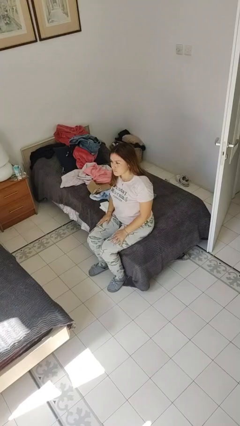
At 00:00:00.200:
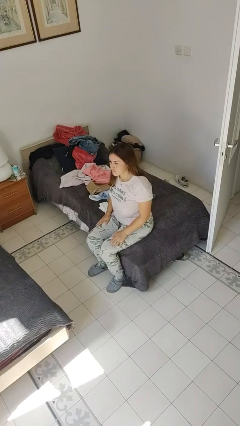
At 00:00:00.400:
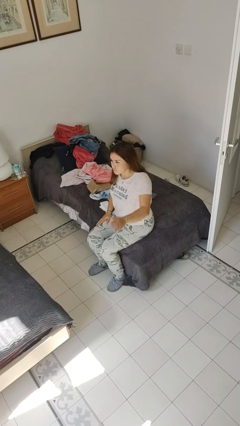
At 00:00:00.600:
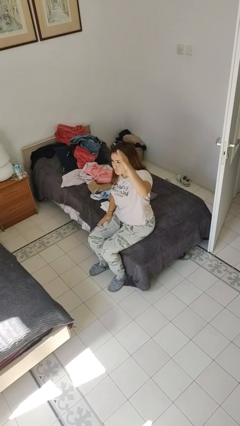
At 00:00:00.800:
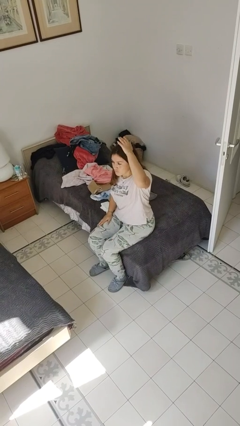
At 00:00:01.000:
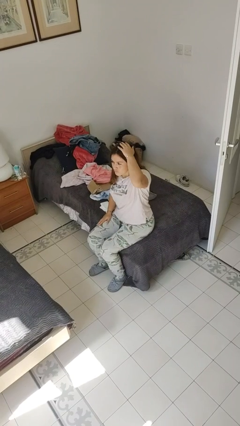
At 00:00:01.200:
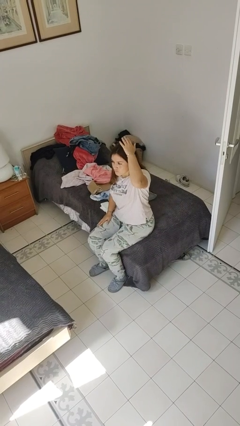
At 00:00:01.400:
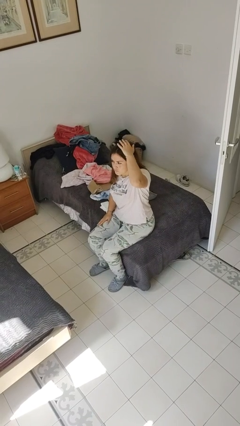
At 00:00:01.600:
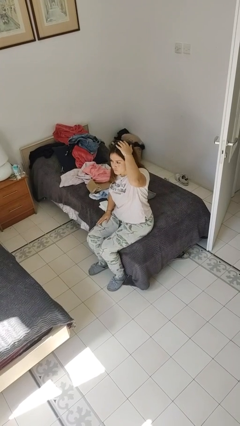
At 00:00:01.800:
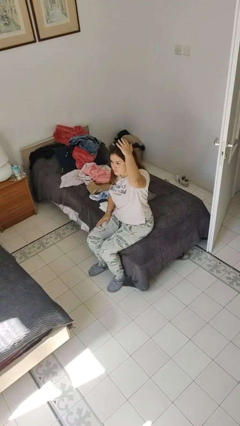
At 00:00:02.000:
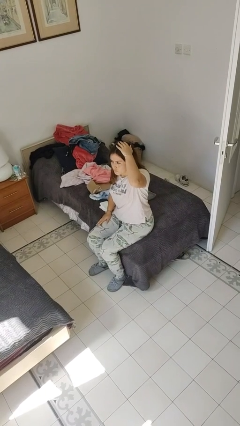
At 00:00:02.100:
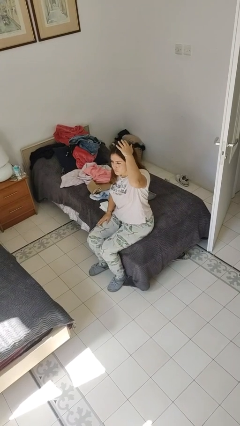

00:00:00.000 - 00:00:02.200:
person pats head

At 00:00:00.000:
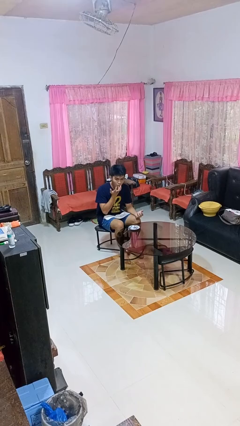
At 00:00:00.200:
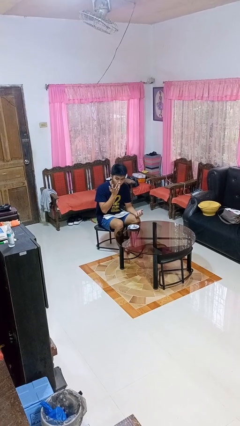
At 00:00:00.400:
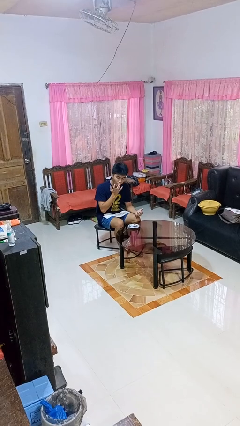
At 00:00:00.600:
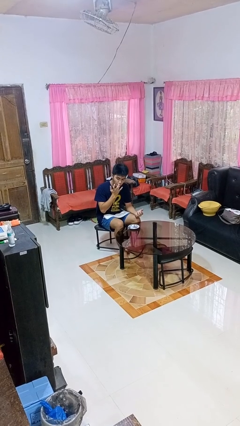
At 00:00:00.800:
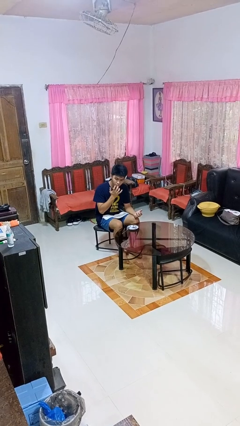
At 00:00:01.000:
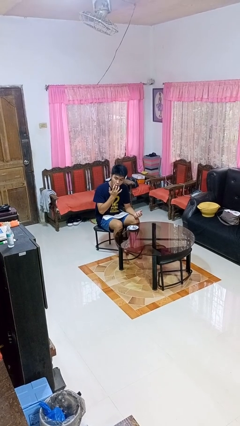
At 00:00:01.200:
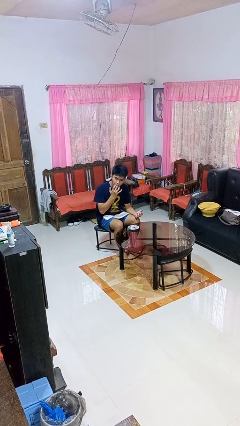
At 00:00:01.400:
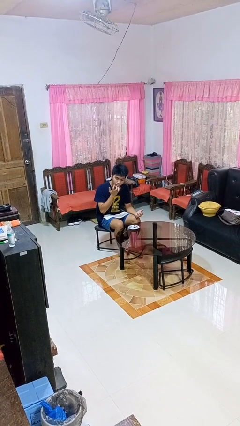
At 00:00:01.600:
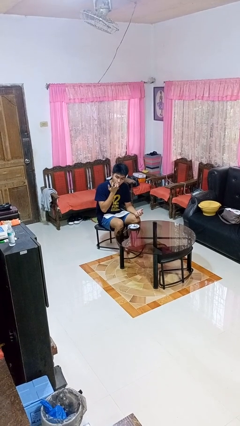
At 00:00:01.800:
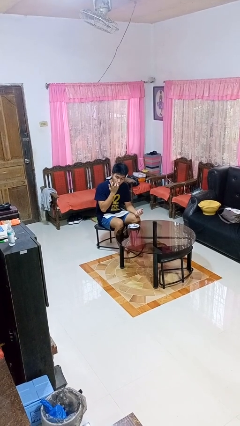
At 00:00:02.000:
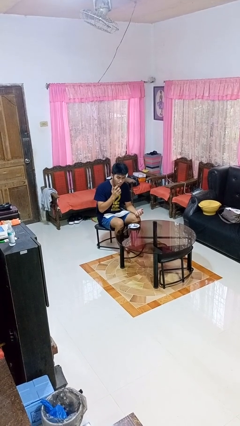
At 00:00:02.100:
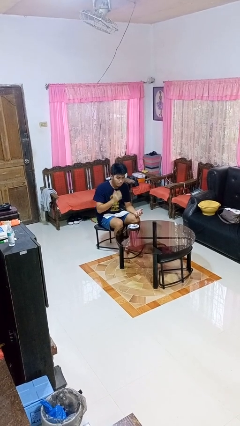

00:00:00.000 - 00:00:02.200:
person licks fingers

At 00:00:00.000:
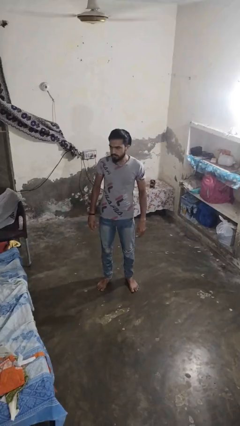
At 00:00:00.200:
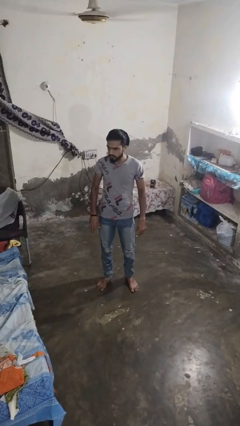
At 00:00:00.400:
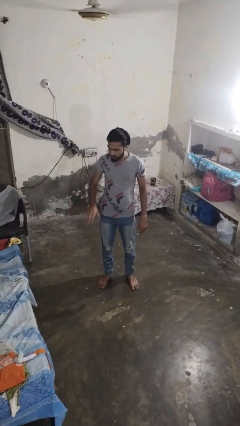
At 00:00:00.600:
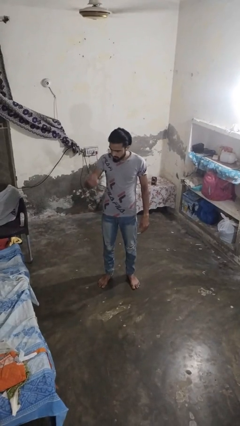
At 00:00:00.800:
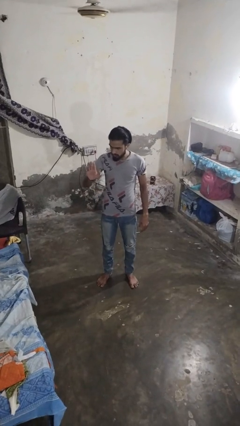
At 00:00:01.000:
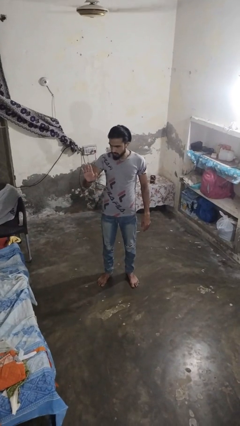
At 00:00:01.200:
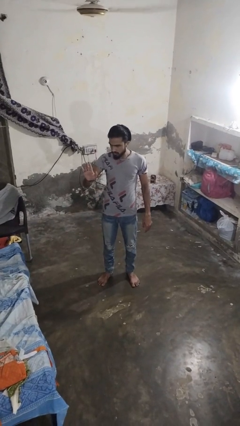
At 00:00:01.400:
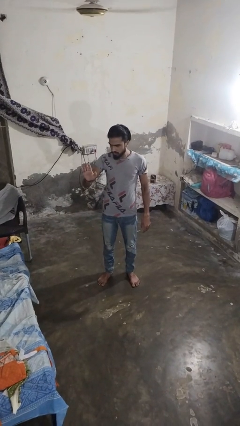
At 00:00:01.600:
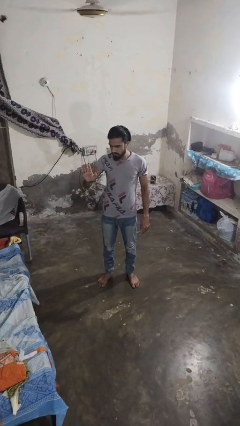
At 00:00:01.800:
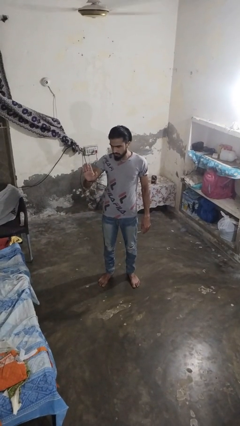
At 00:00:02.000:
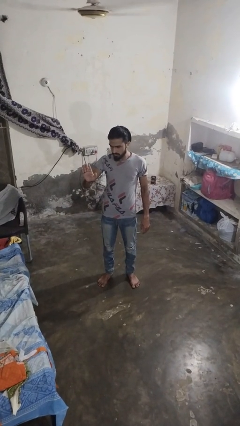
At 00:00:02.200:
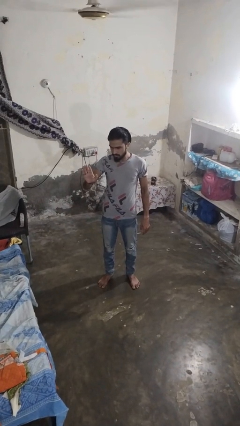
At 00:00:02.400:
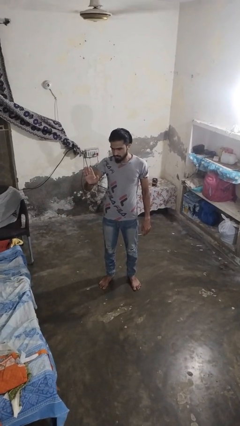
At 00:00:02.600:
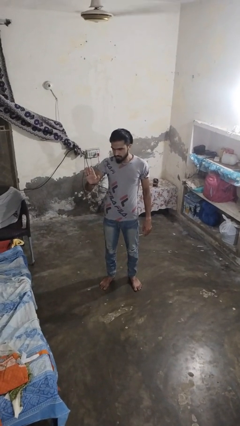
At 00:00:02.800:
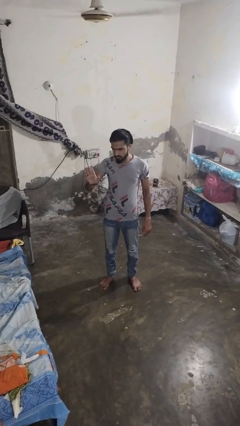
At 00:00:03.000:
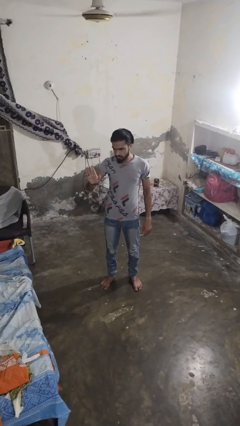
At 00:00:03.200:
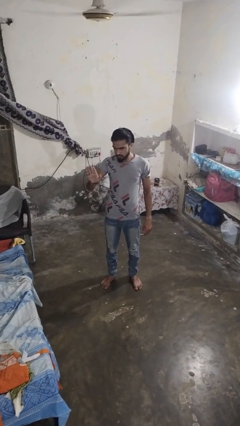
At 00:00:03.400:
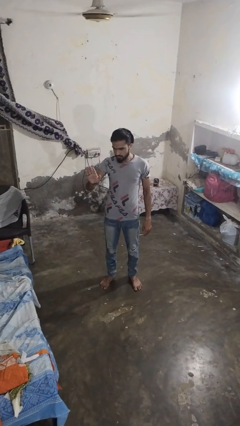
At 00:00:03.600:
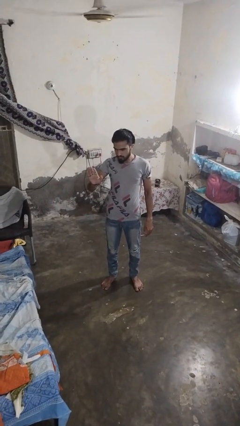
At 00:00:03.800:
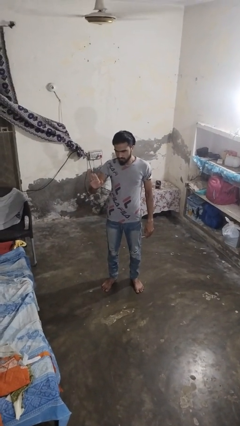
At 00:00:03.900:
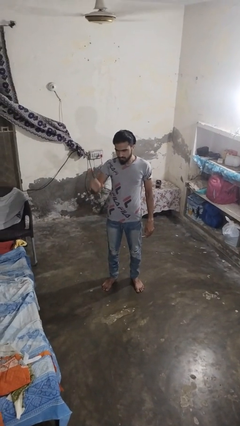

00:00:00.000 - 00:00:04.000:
person gestures stop

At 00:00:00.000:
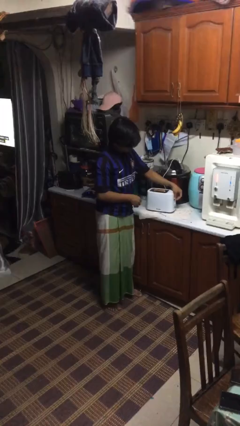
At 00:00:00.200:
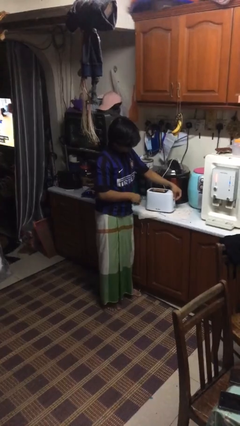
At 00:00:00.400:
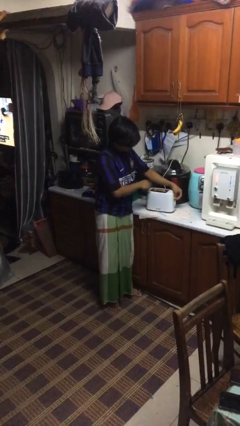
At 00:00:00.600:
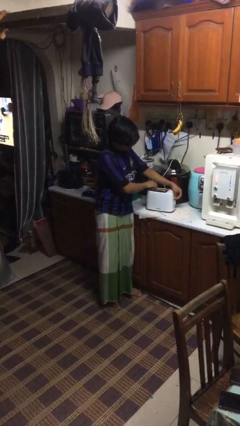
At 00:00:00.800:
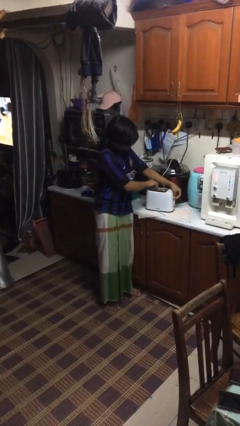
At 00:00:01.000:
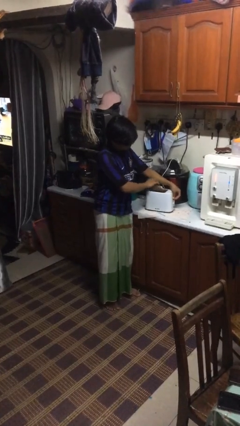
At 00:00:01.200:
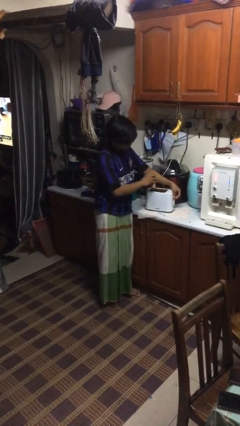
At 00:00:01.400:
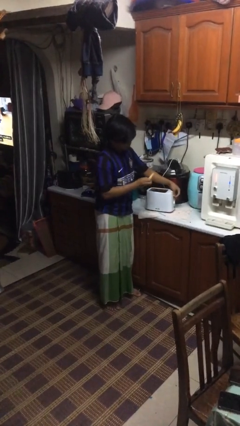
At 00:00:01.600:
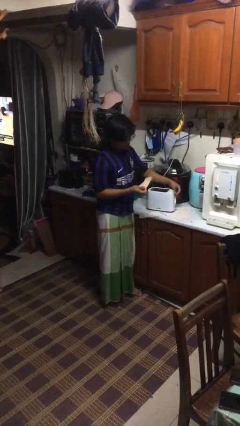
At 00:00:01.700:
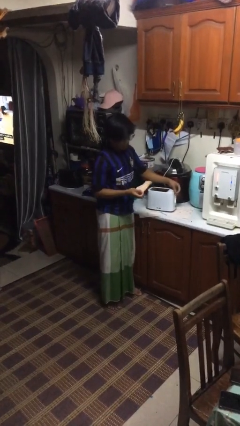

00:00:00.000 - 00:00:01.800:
person takes object from toaster

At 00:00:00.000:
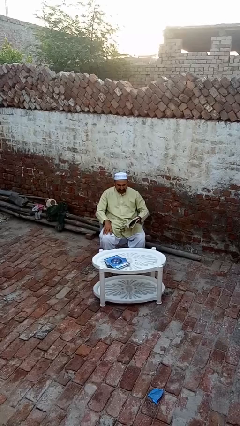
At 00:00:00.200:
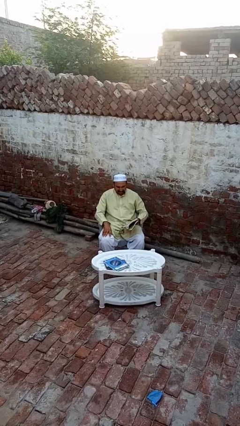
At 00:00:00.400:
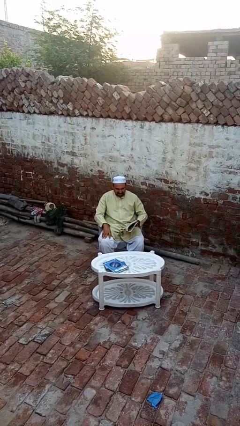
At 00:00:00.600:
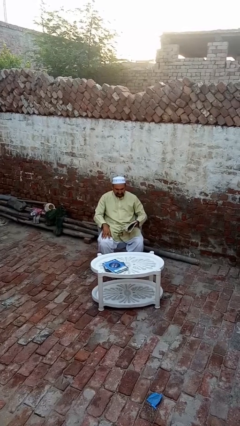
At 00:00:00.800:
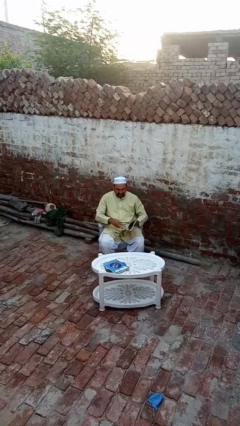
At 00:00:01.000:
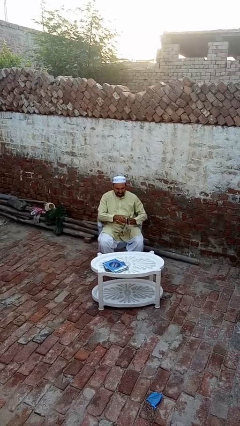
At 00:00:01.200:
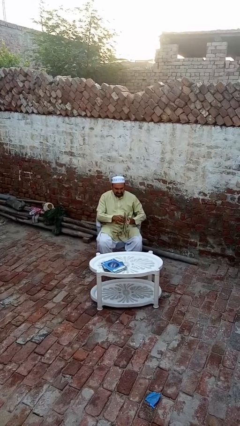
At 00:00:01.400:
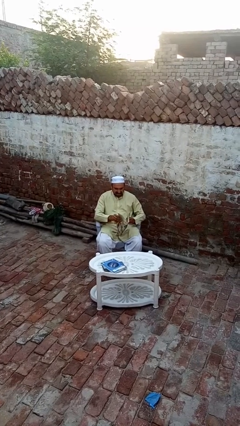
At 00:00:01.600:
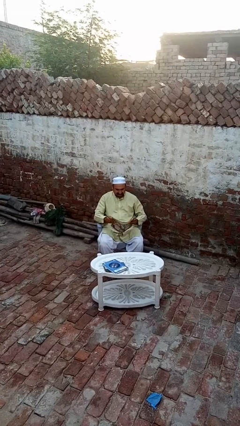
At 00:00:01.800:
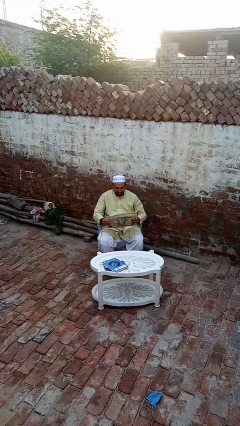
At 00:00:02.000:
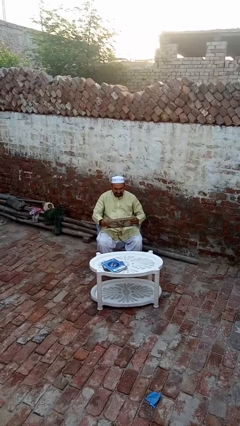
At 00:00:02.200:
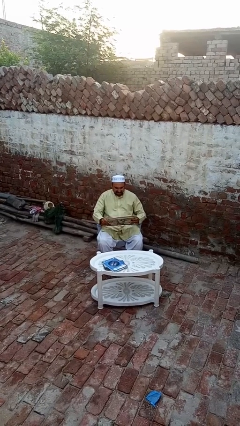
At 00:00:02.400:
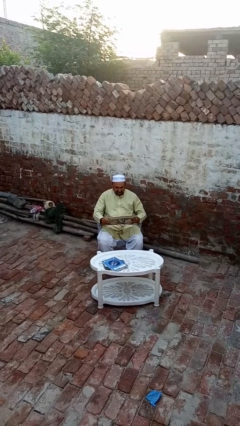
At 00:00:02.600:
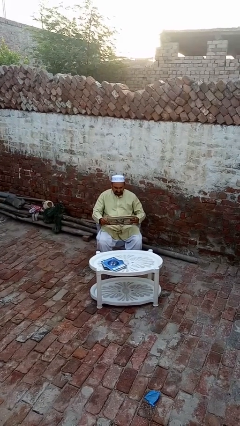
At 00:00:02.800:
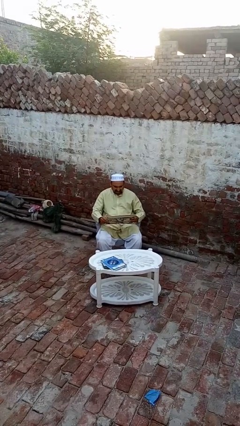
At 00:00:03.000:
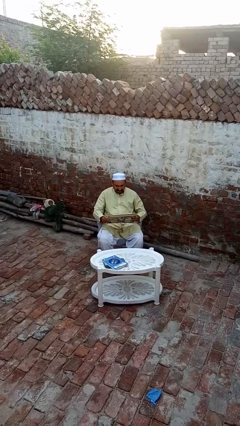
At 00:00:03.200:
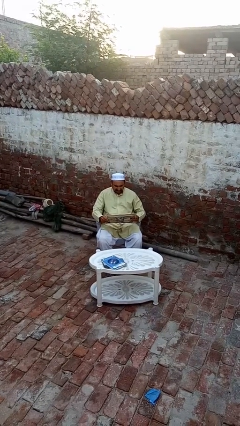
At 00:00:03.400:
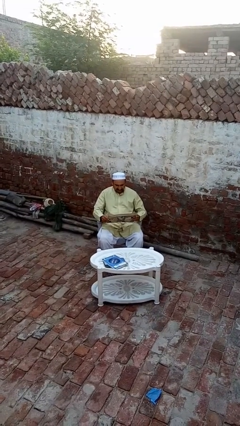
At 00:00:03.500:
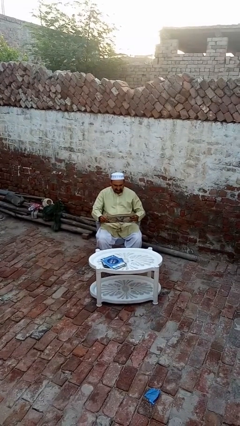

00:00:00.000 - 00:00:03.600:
person reads magazine

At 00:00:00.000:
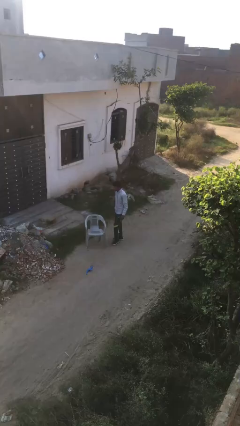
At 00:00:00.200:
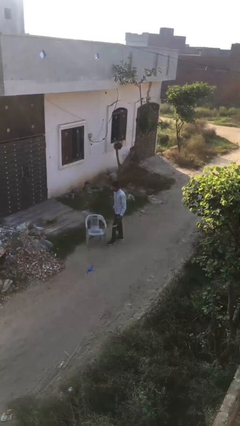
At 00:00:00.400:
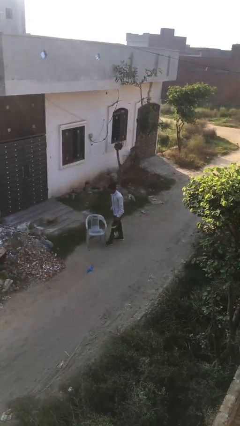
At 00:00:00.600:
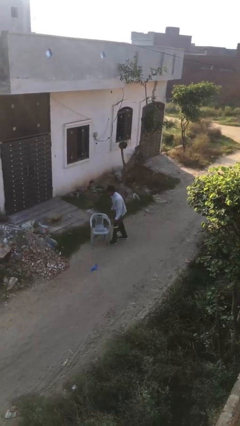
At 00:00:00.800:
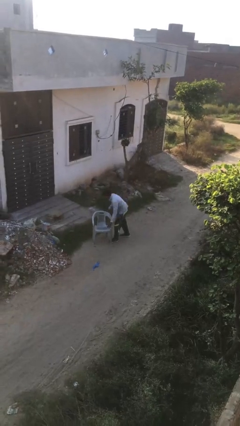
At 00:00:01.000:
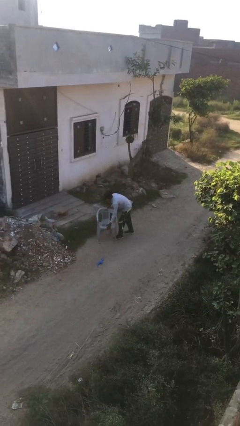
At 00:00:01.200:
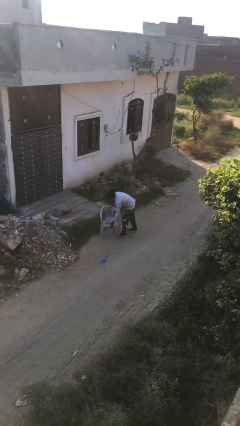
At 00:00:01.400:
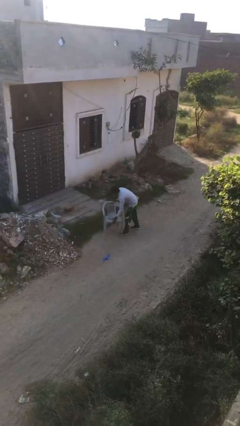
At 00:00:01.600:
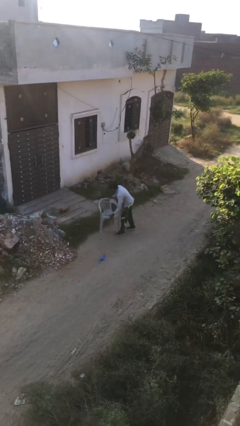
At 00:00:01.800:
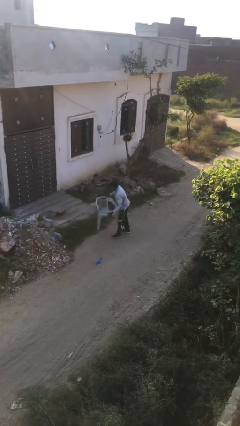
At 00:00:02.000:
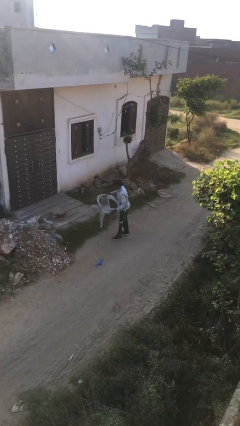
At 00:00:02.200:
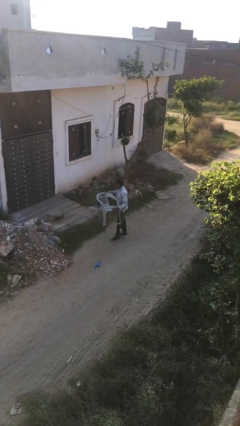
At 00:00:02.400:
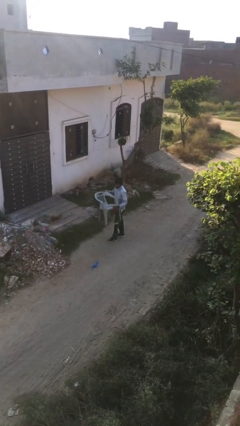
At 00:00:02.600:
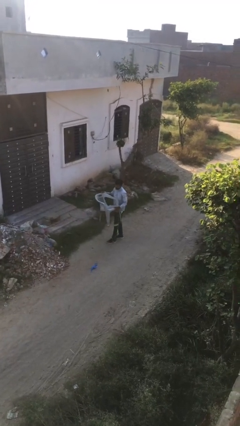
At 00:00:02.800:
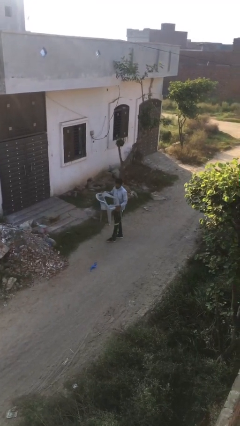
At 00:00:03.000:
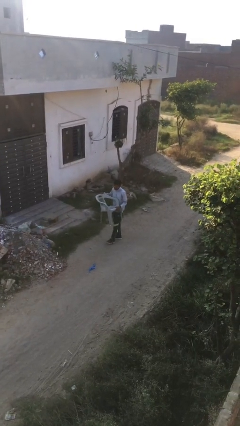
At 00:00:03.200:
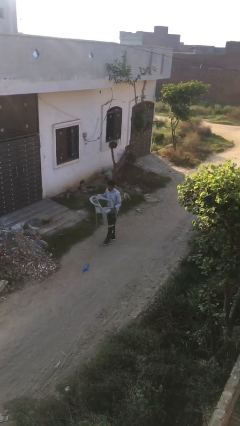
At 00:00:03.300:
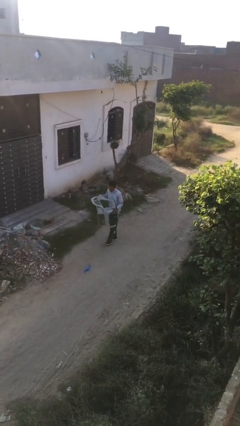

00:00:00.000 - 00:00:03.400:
person picks up object from floor
